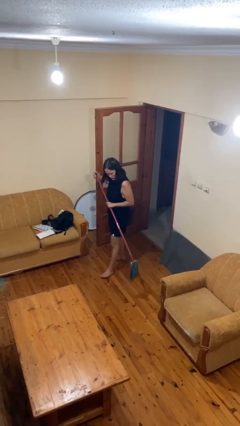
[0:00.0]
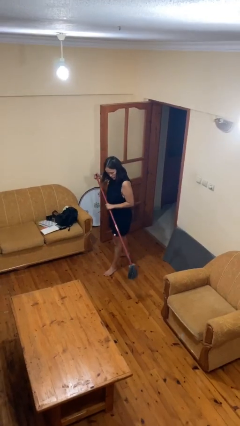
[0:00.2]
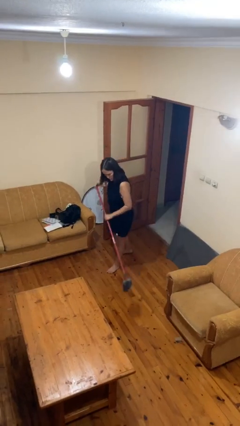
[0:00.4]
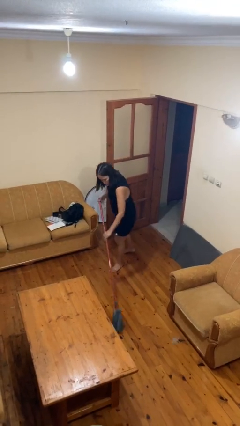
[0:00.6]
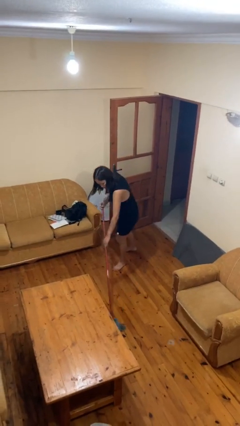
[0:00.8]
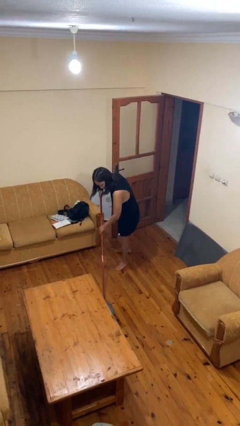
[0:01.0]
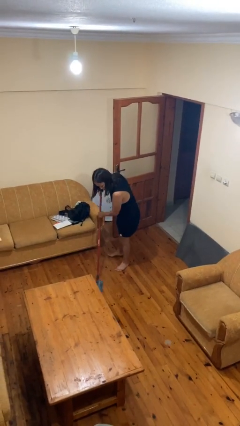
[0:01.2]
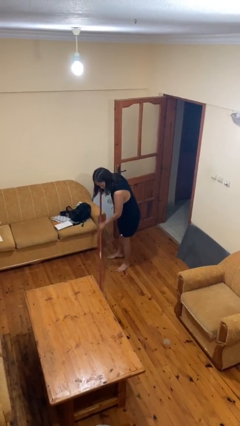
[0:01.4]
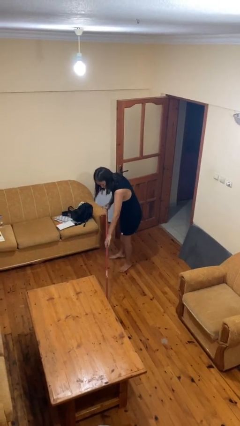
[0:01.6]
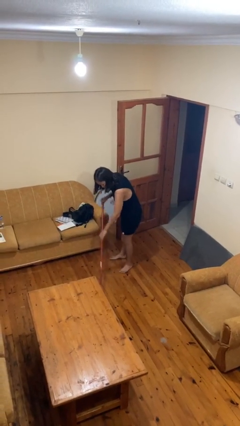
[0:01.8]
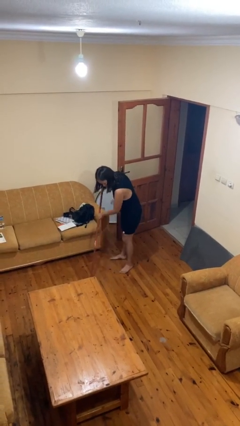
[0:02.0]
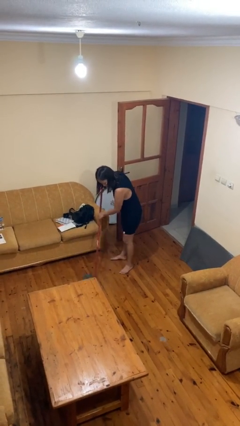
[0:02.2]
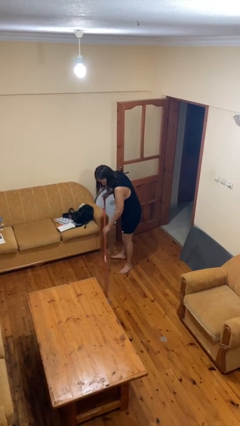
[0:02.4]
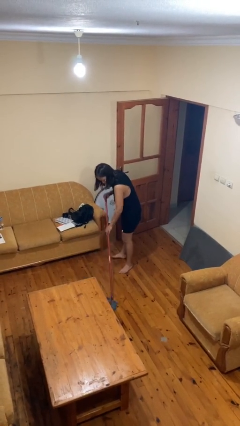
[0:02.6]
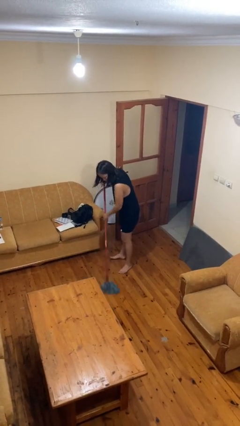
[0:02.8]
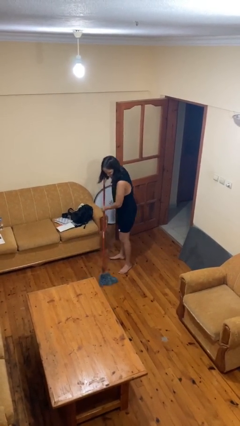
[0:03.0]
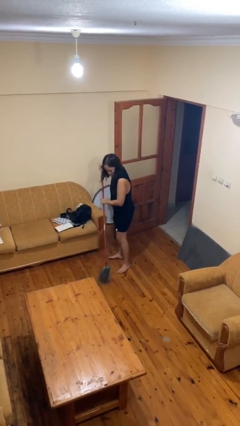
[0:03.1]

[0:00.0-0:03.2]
person mops

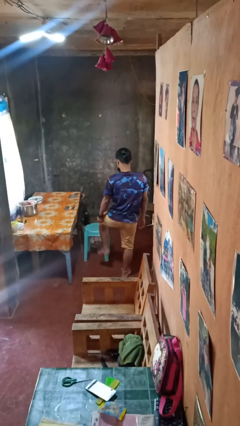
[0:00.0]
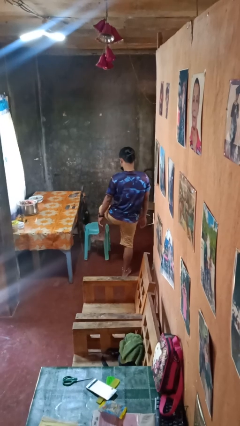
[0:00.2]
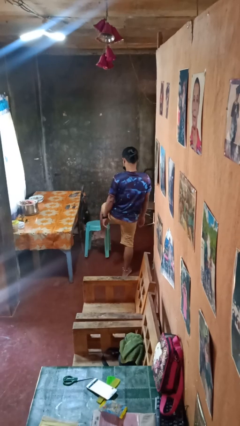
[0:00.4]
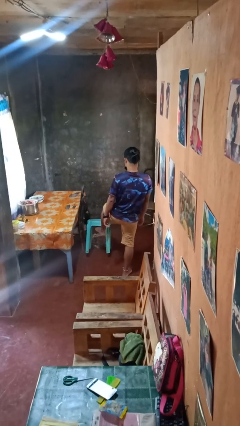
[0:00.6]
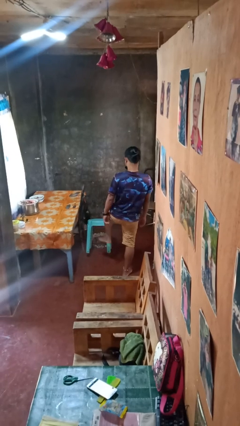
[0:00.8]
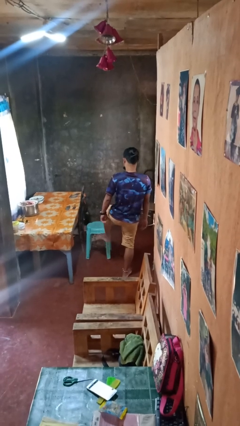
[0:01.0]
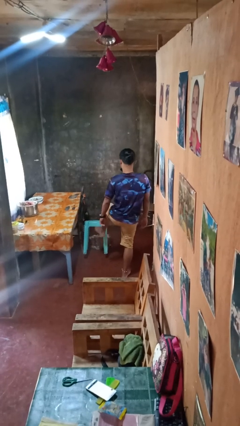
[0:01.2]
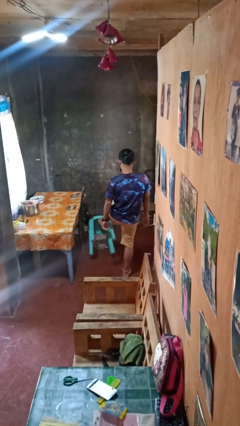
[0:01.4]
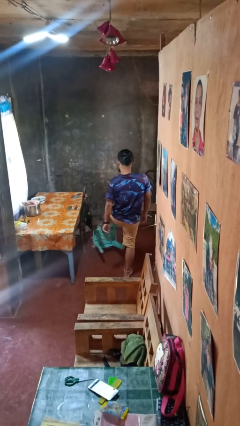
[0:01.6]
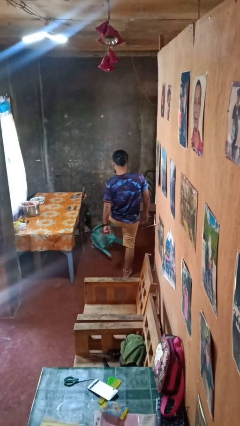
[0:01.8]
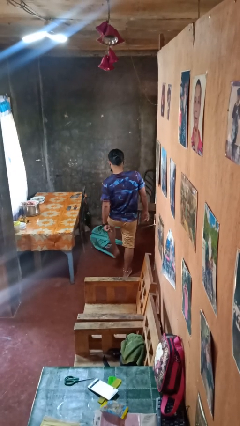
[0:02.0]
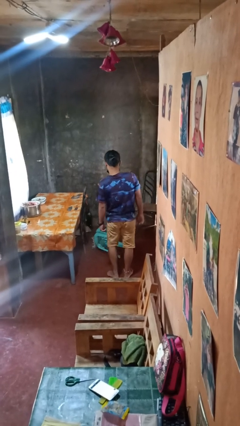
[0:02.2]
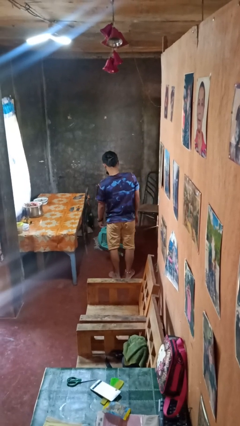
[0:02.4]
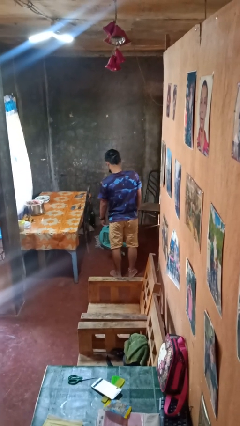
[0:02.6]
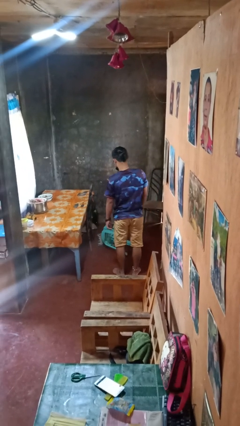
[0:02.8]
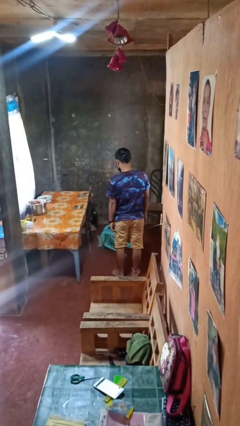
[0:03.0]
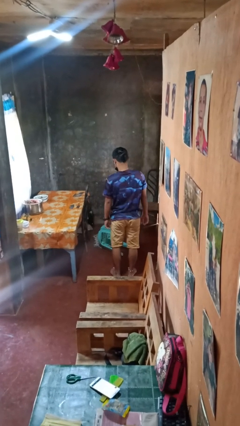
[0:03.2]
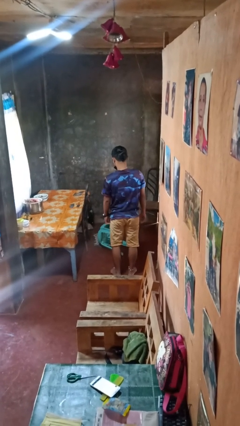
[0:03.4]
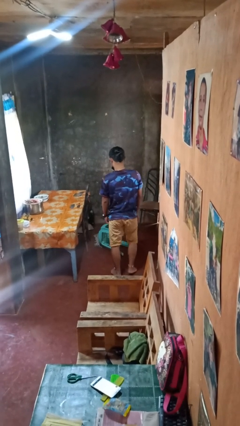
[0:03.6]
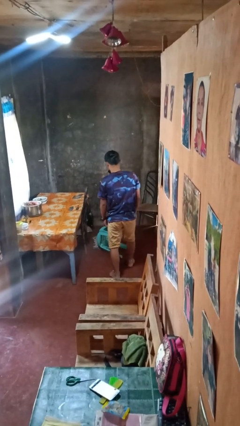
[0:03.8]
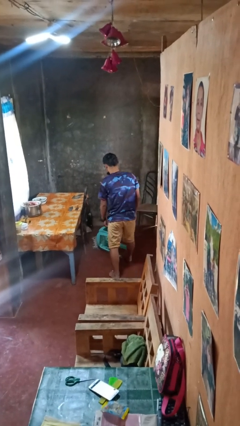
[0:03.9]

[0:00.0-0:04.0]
person knocks over furniture

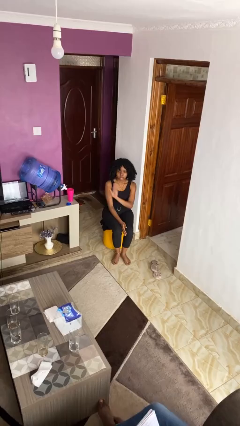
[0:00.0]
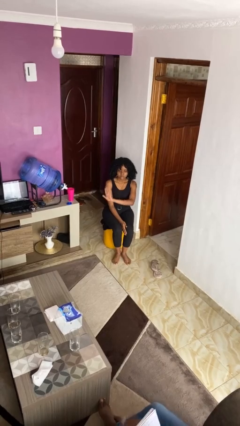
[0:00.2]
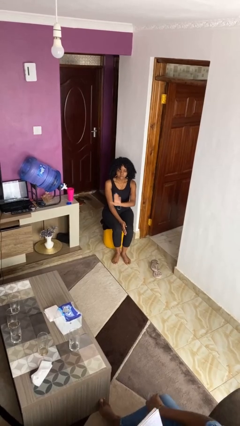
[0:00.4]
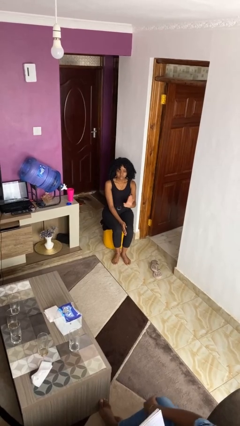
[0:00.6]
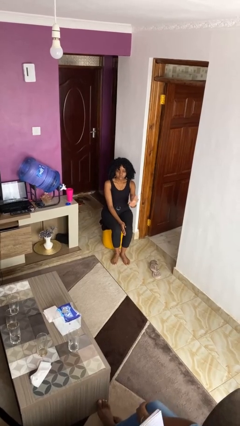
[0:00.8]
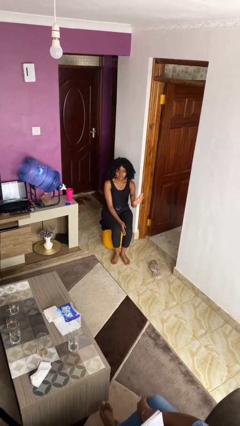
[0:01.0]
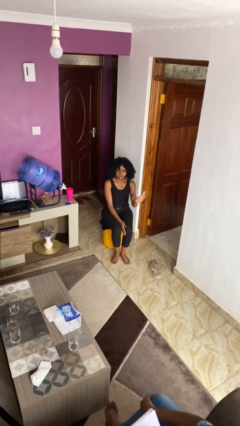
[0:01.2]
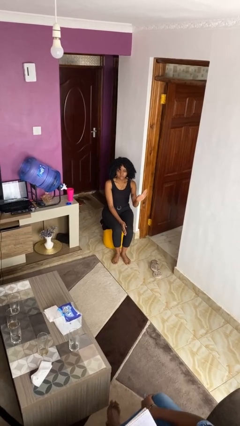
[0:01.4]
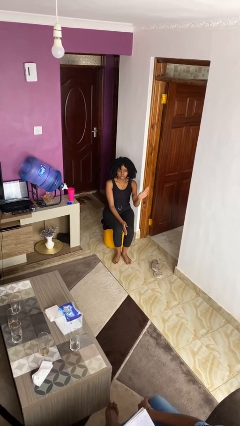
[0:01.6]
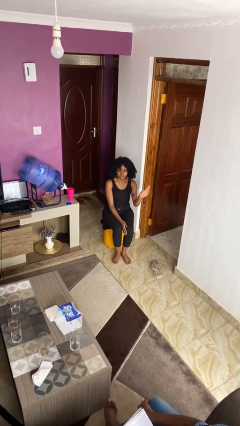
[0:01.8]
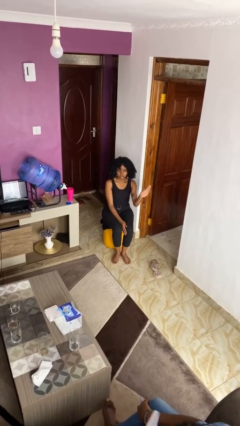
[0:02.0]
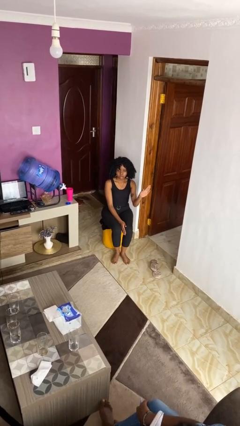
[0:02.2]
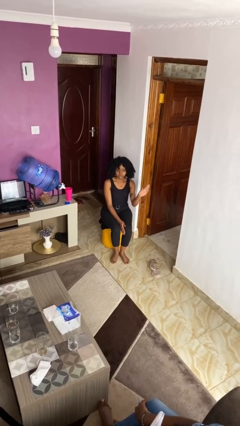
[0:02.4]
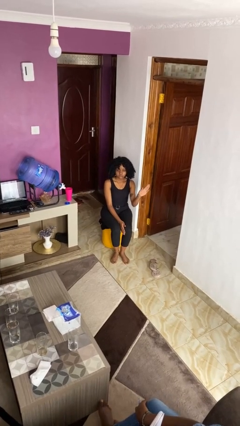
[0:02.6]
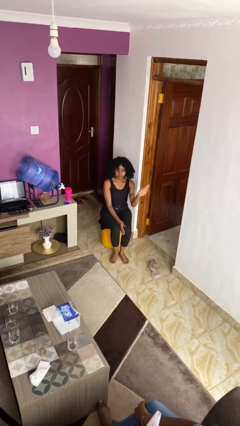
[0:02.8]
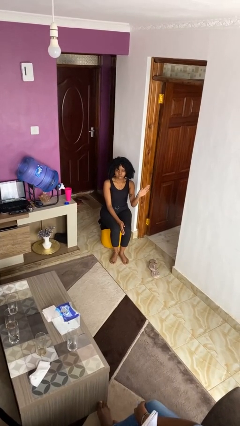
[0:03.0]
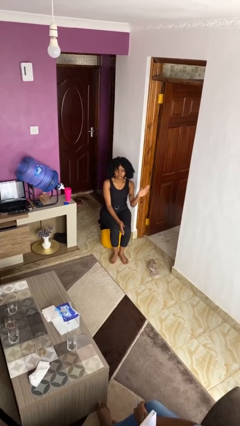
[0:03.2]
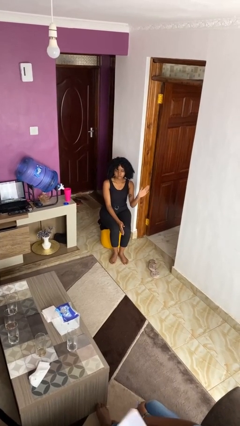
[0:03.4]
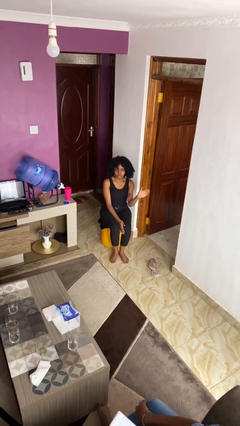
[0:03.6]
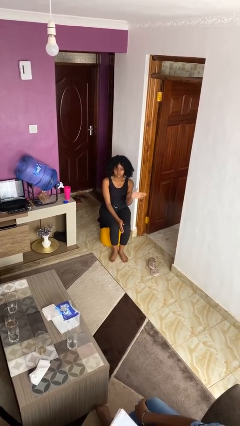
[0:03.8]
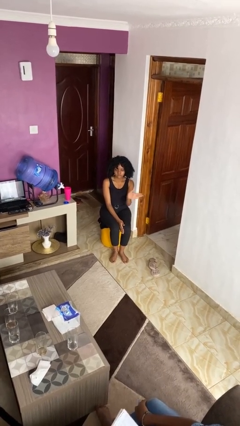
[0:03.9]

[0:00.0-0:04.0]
person gestures swipe left

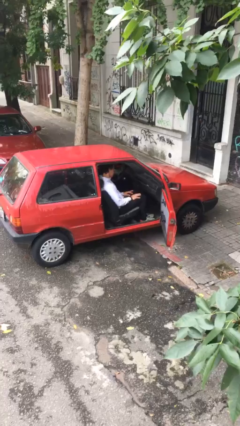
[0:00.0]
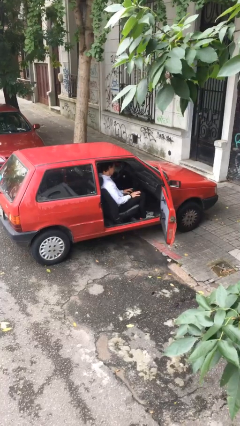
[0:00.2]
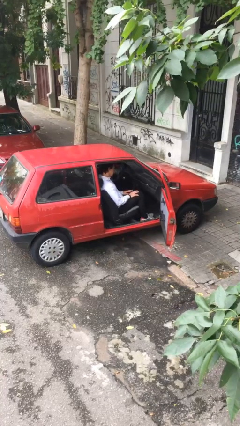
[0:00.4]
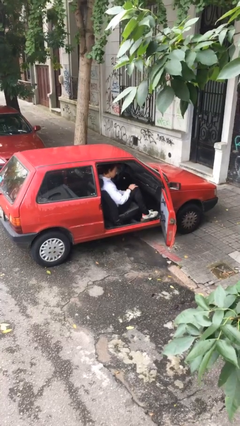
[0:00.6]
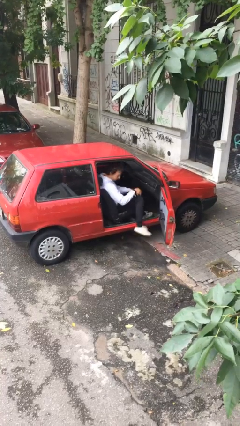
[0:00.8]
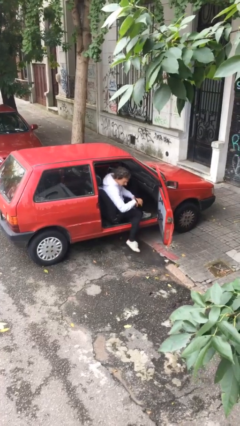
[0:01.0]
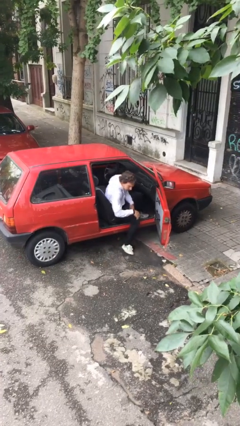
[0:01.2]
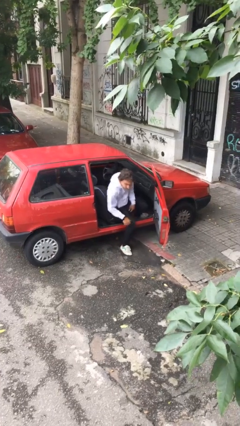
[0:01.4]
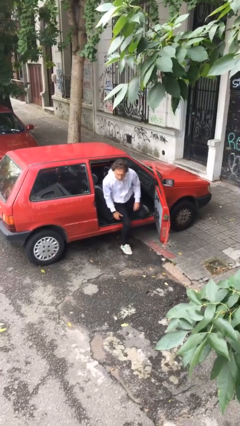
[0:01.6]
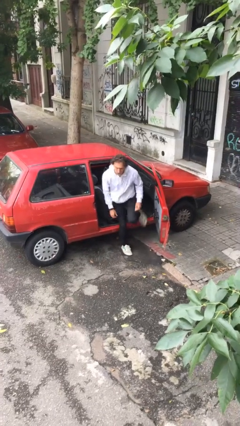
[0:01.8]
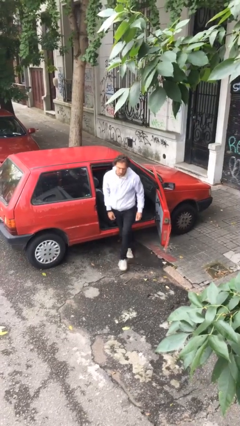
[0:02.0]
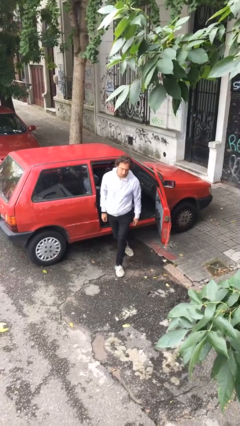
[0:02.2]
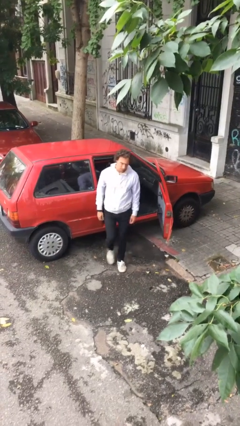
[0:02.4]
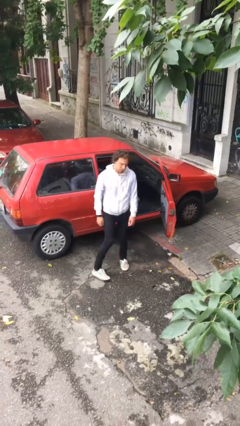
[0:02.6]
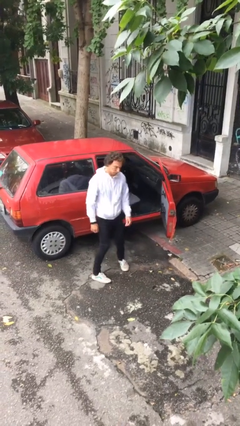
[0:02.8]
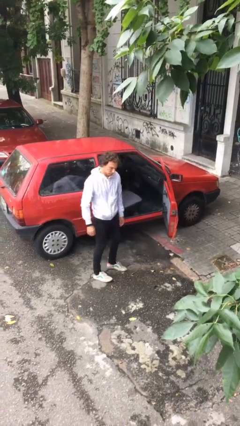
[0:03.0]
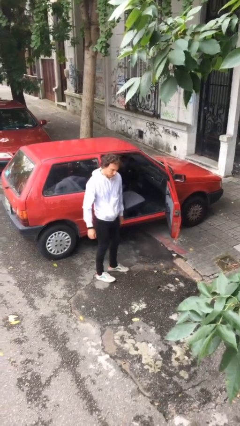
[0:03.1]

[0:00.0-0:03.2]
person exits car

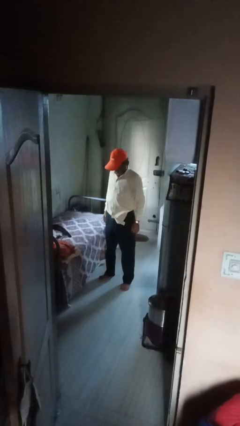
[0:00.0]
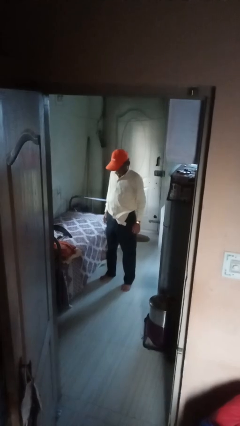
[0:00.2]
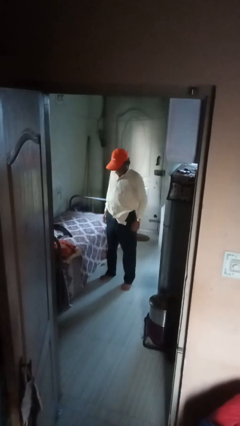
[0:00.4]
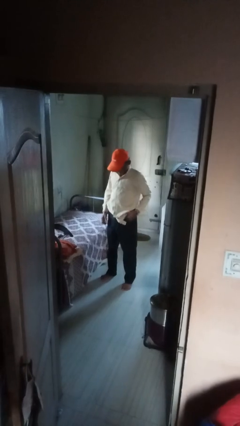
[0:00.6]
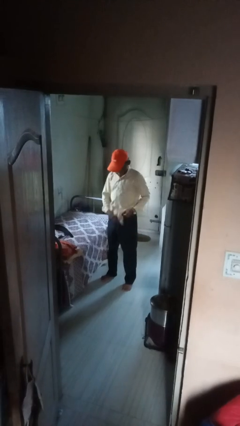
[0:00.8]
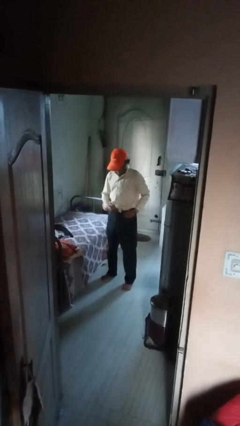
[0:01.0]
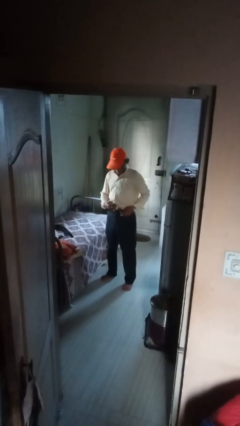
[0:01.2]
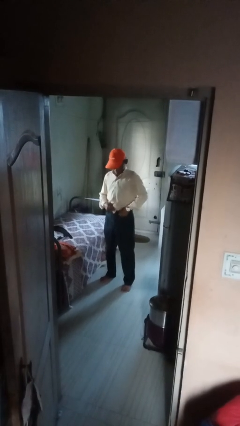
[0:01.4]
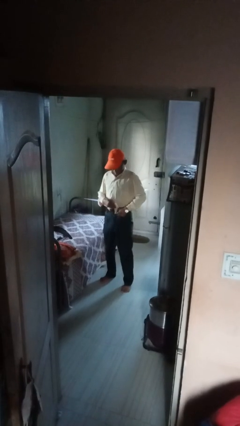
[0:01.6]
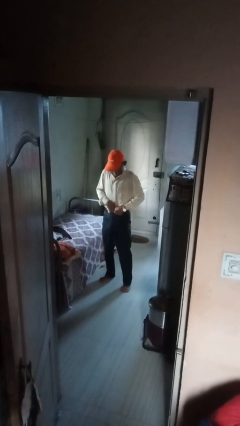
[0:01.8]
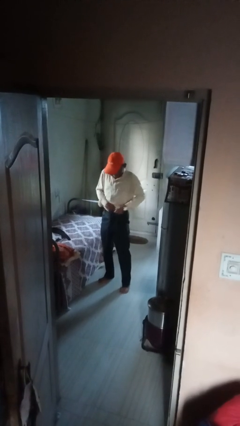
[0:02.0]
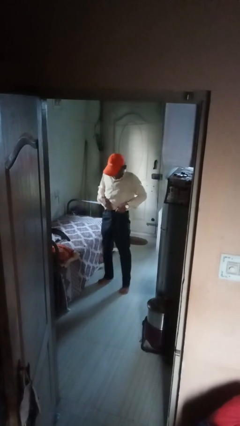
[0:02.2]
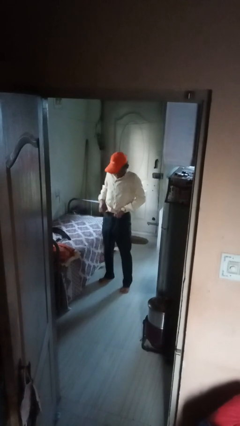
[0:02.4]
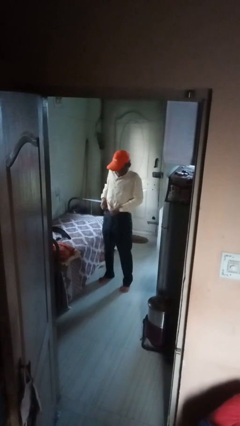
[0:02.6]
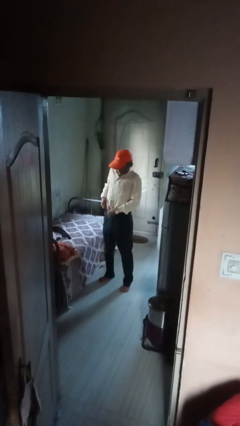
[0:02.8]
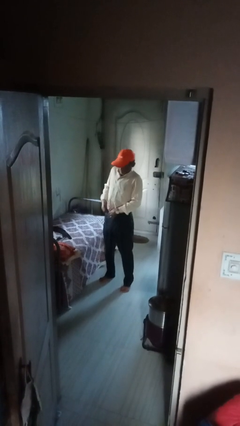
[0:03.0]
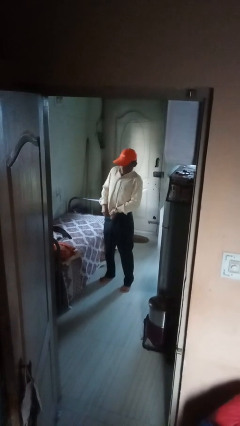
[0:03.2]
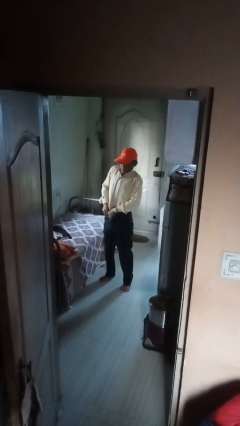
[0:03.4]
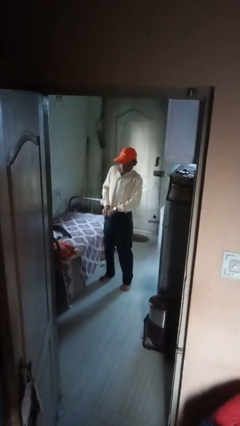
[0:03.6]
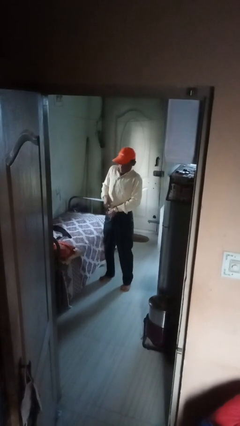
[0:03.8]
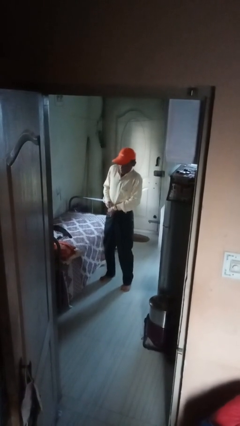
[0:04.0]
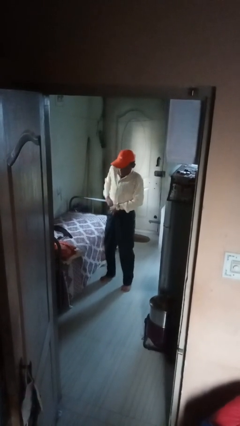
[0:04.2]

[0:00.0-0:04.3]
person tucks in shirt
